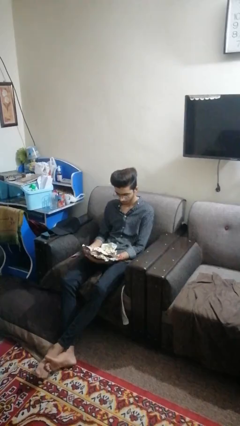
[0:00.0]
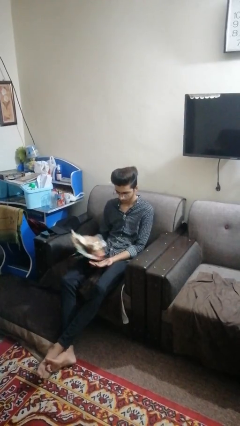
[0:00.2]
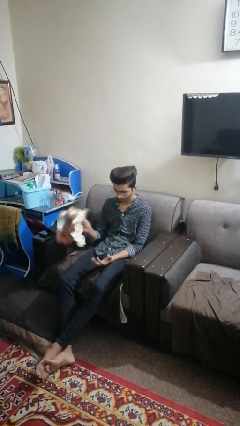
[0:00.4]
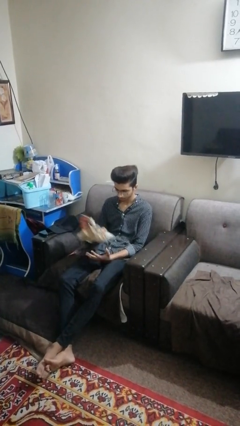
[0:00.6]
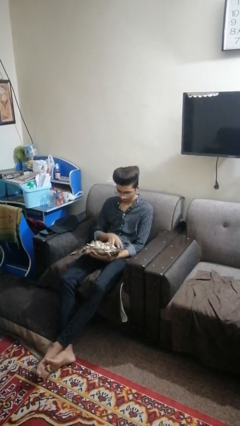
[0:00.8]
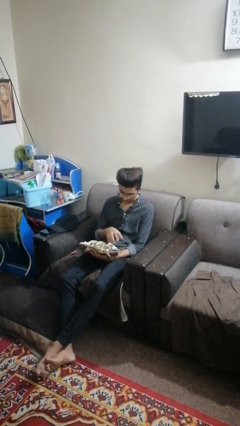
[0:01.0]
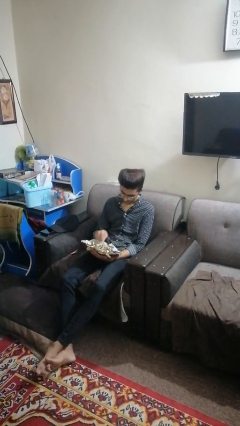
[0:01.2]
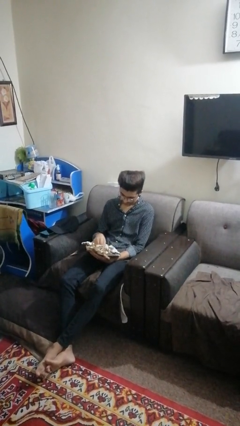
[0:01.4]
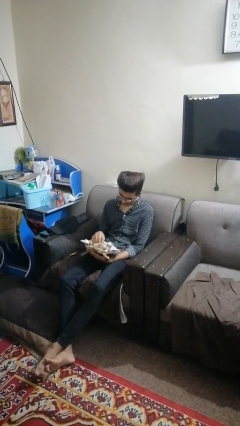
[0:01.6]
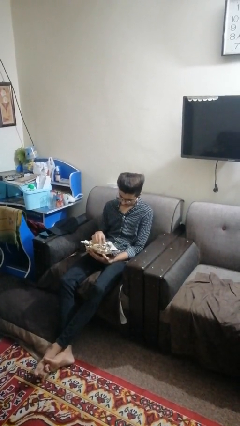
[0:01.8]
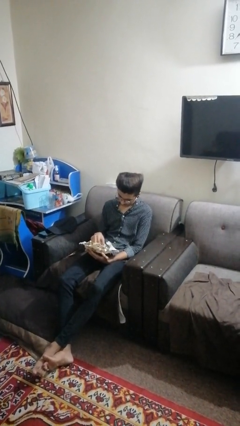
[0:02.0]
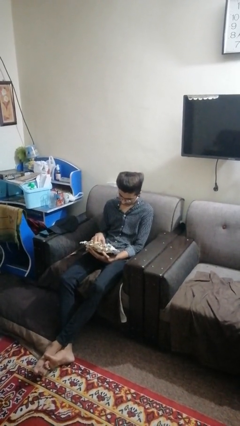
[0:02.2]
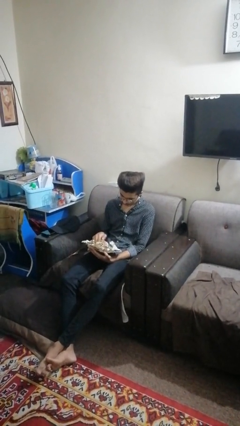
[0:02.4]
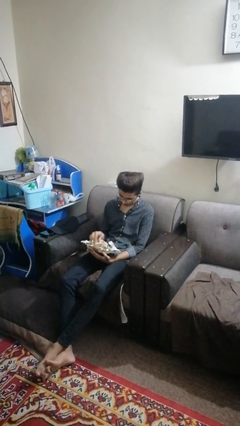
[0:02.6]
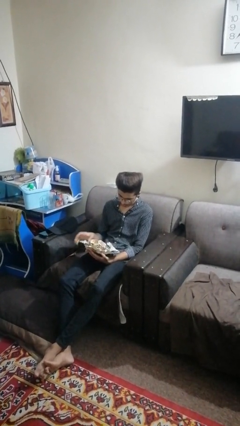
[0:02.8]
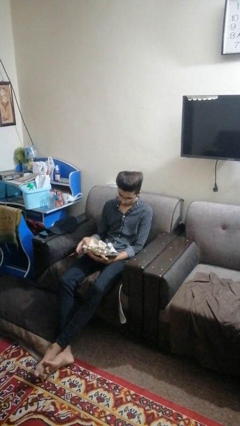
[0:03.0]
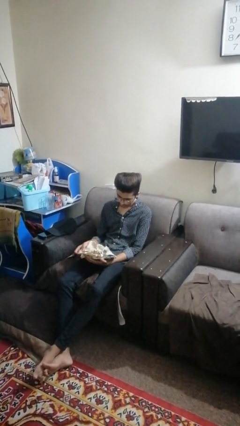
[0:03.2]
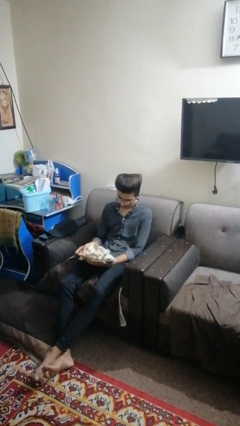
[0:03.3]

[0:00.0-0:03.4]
person reads newspaper

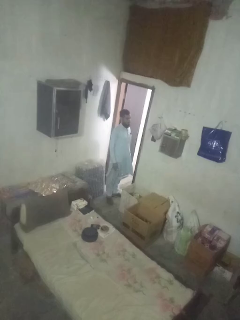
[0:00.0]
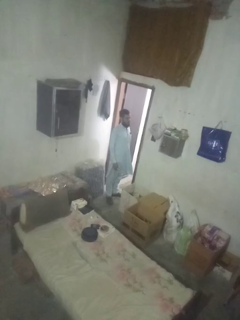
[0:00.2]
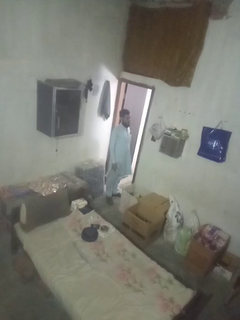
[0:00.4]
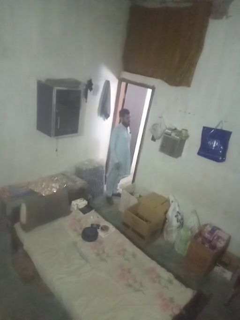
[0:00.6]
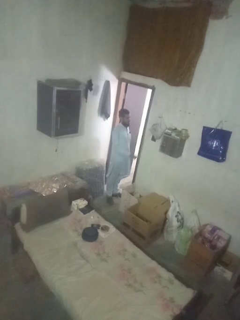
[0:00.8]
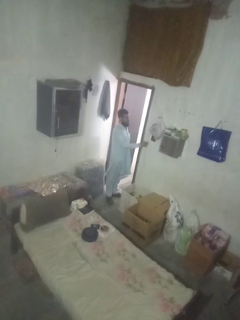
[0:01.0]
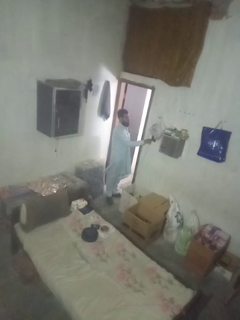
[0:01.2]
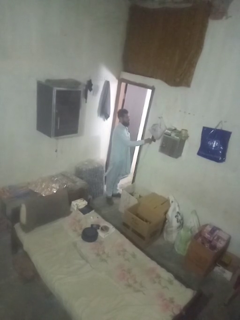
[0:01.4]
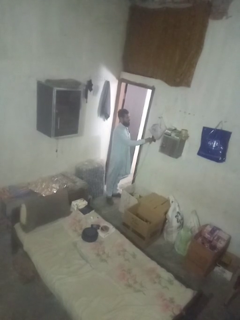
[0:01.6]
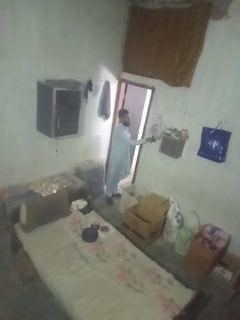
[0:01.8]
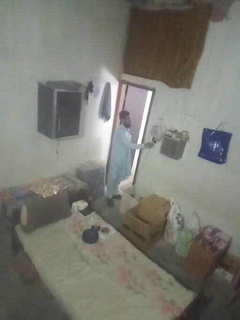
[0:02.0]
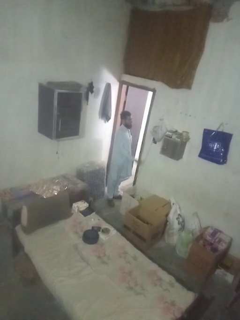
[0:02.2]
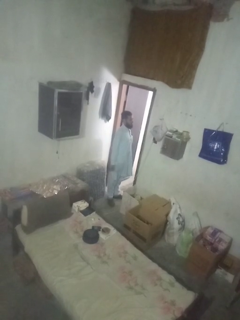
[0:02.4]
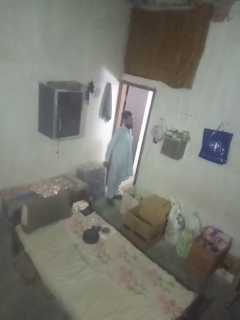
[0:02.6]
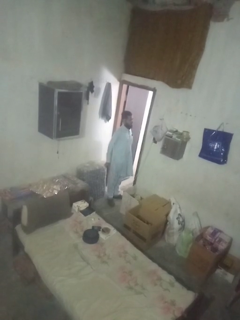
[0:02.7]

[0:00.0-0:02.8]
person plugs into electrical socket

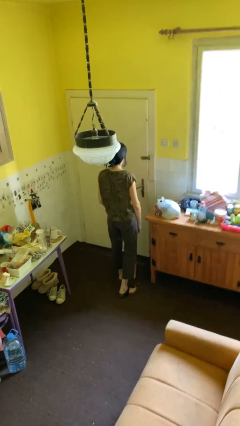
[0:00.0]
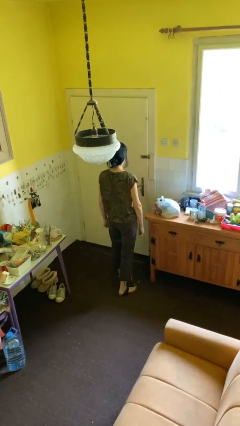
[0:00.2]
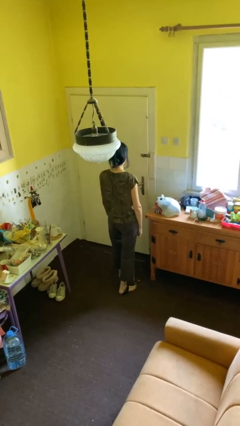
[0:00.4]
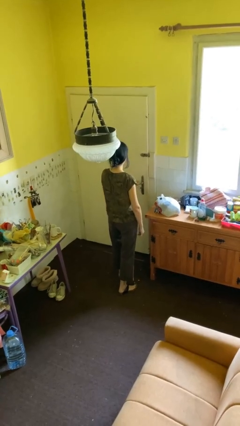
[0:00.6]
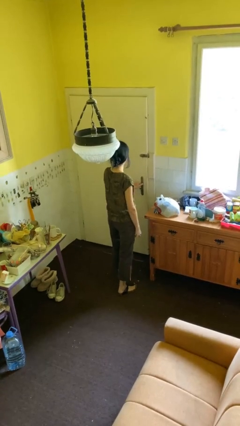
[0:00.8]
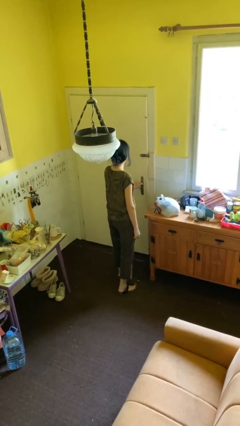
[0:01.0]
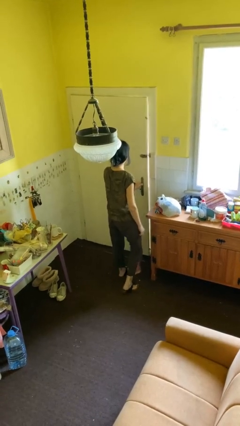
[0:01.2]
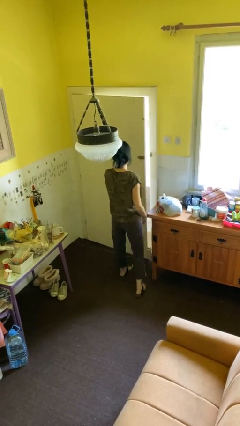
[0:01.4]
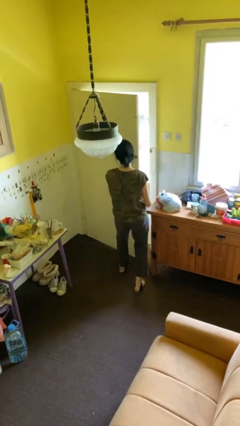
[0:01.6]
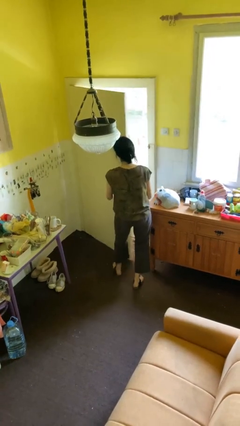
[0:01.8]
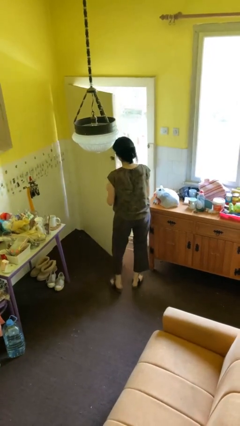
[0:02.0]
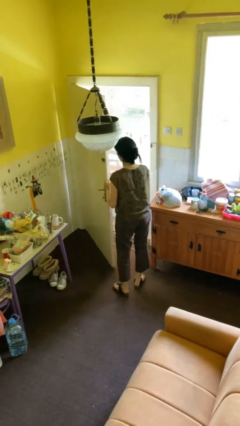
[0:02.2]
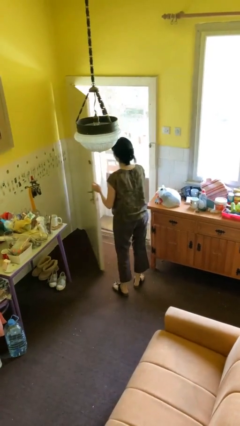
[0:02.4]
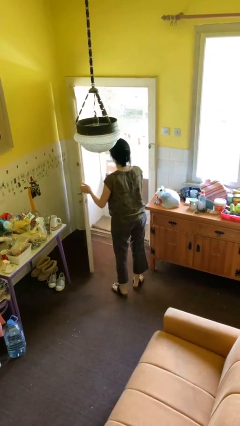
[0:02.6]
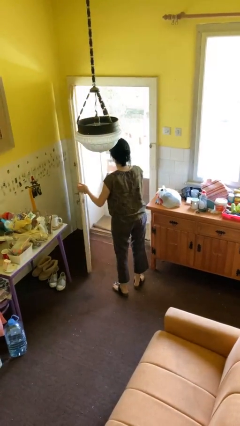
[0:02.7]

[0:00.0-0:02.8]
person opens facility door

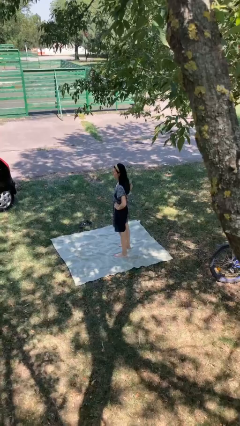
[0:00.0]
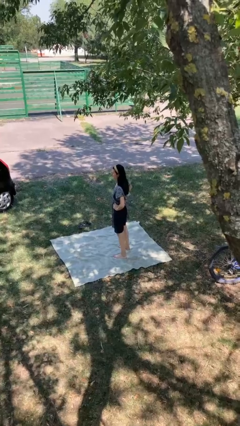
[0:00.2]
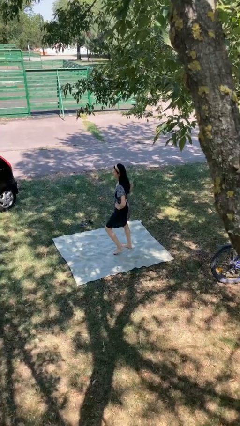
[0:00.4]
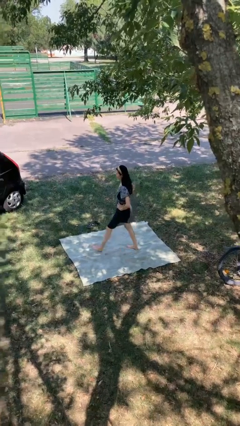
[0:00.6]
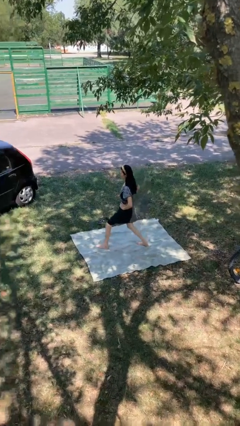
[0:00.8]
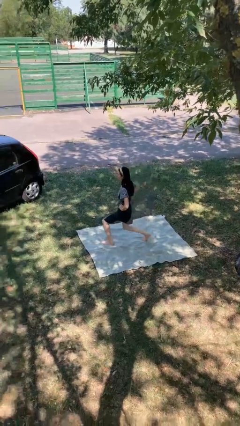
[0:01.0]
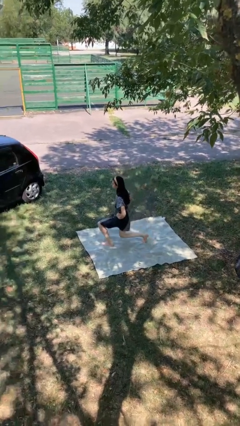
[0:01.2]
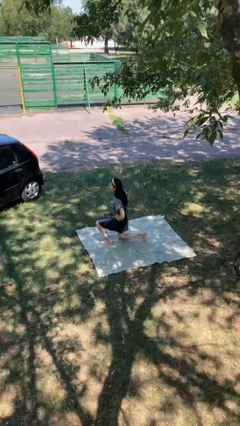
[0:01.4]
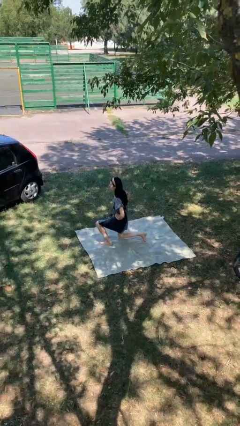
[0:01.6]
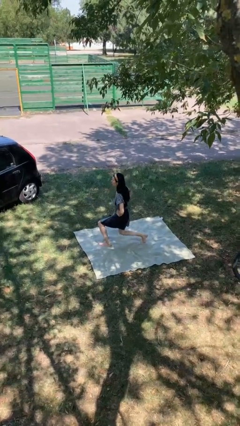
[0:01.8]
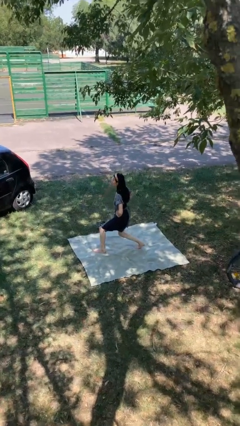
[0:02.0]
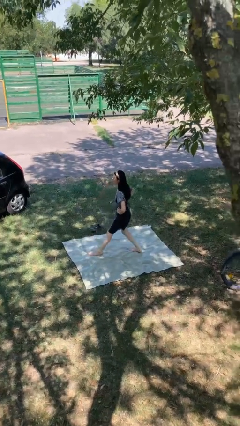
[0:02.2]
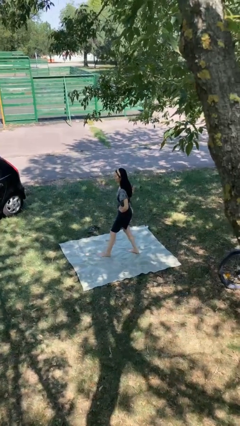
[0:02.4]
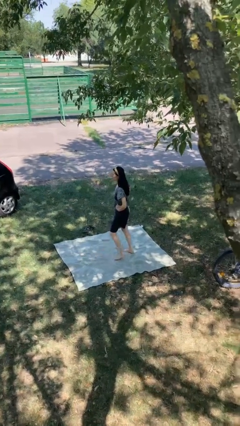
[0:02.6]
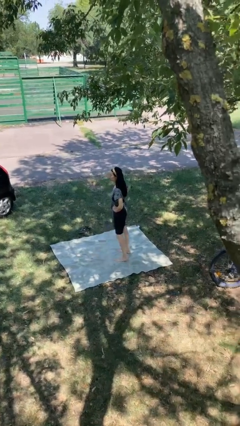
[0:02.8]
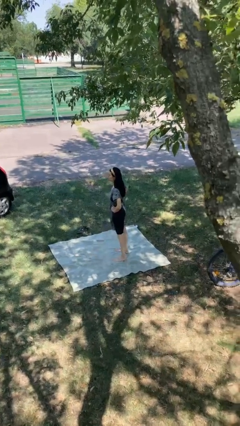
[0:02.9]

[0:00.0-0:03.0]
person exercises with lunges

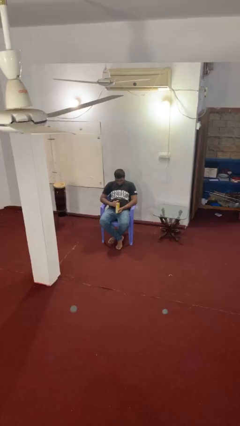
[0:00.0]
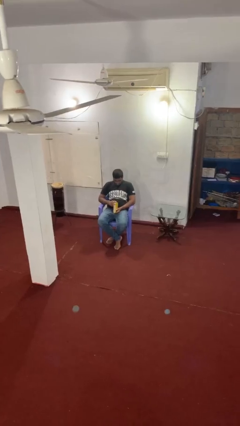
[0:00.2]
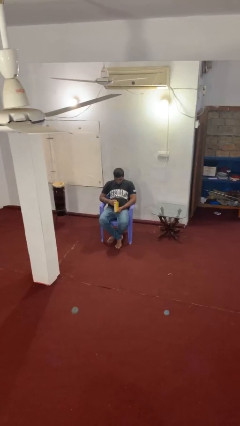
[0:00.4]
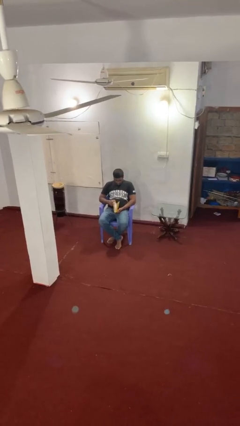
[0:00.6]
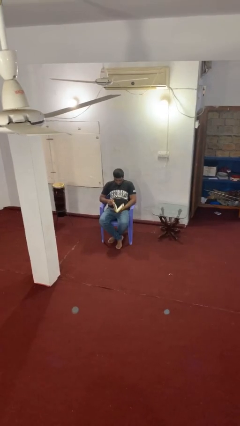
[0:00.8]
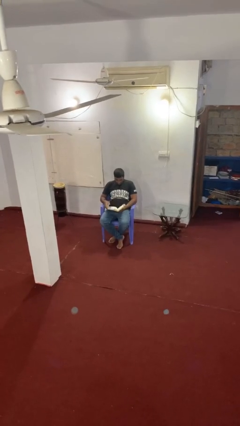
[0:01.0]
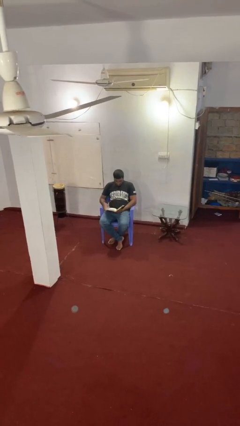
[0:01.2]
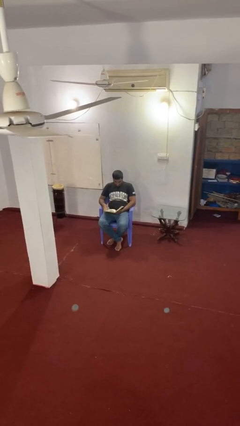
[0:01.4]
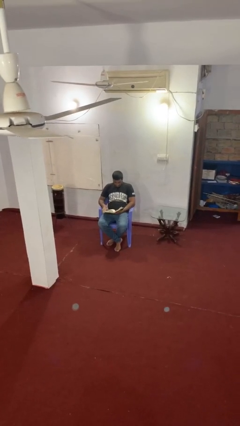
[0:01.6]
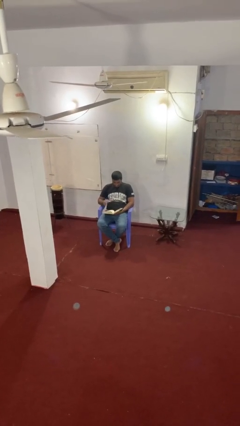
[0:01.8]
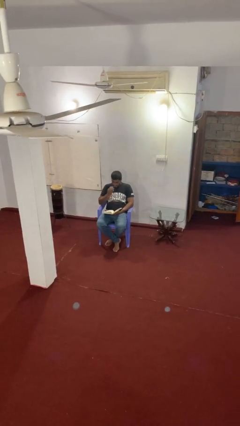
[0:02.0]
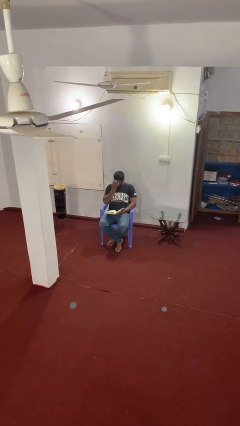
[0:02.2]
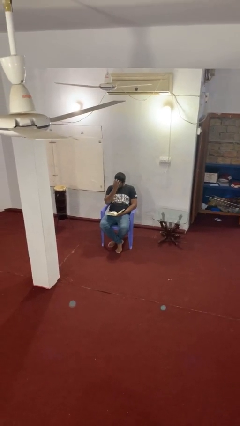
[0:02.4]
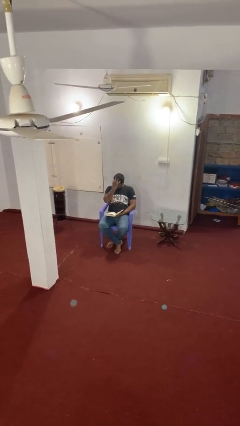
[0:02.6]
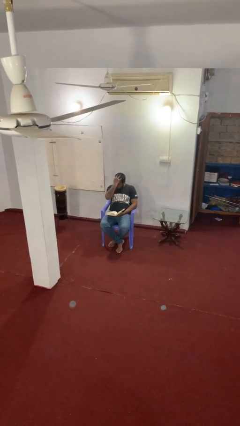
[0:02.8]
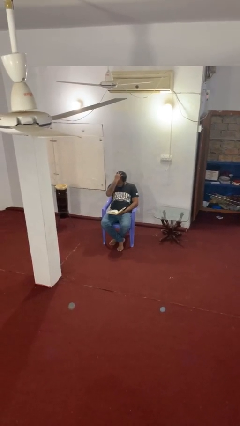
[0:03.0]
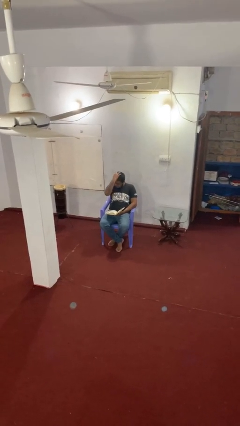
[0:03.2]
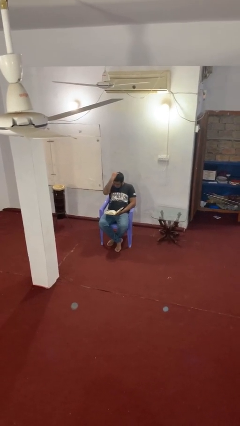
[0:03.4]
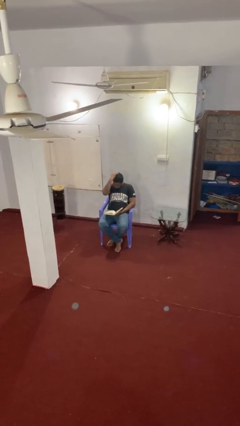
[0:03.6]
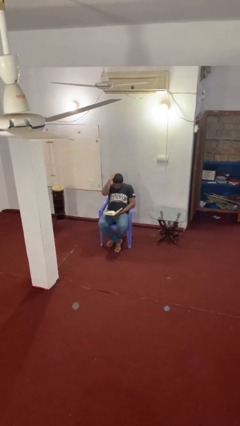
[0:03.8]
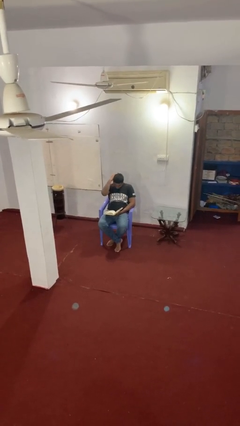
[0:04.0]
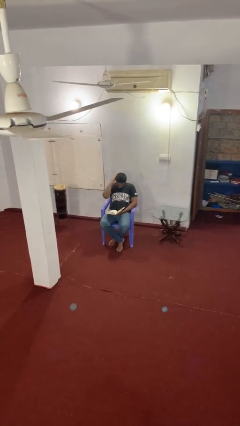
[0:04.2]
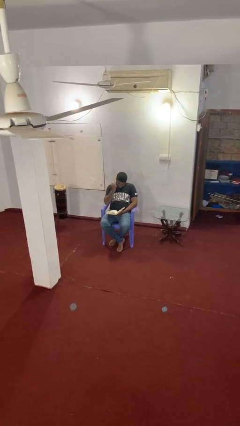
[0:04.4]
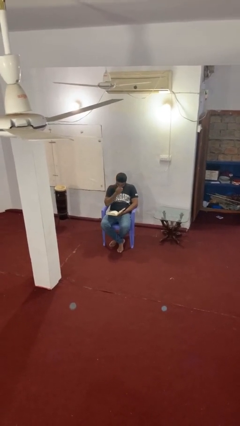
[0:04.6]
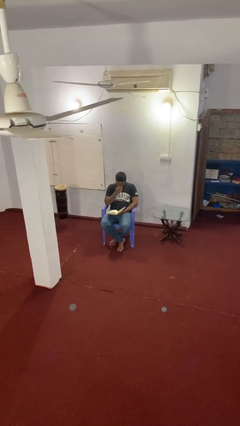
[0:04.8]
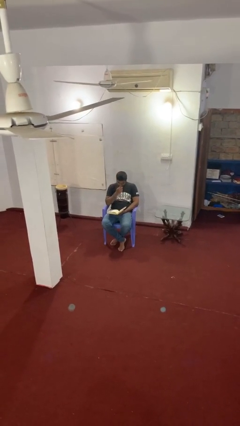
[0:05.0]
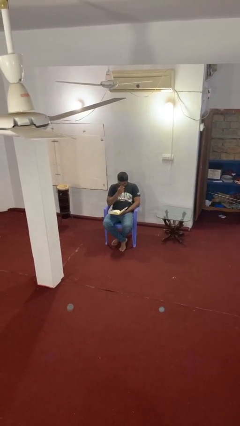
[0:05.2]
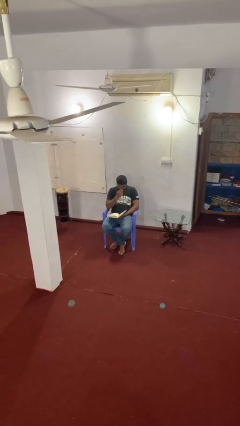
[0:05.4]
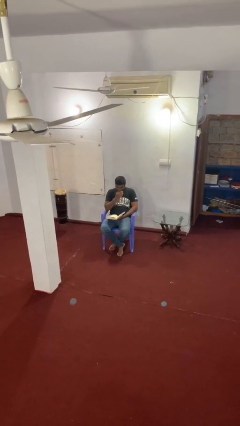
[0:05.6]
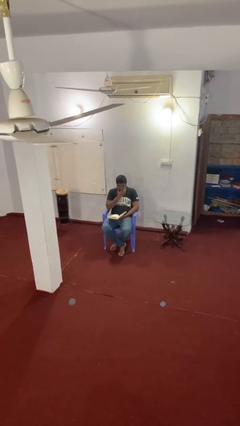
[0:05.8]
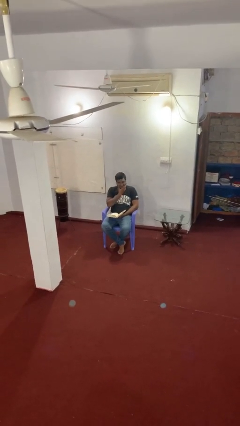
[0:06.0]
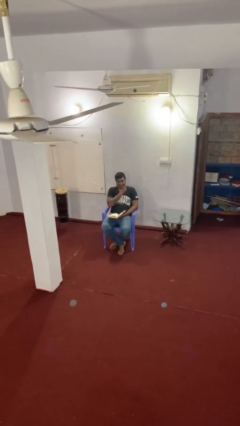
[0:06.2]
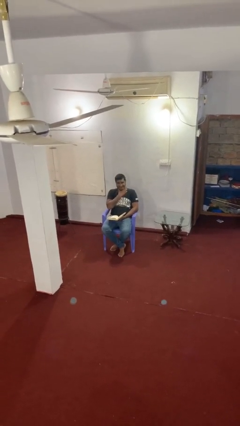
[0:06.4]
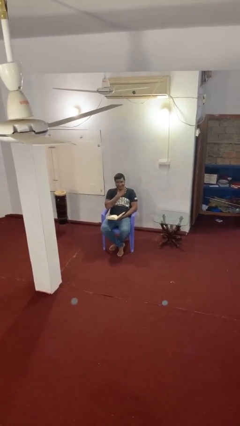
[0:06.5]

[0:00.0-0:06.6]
person reads document
